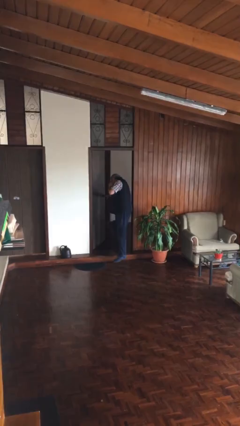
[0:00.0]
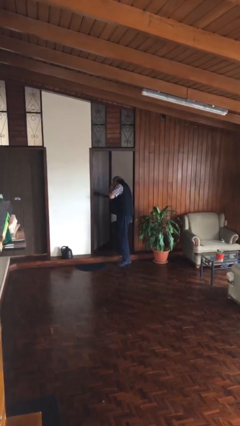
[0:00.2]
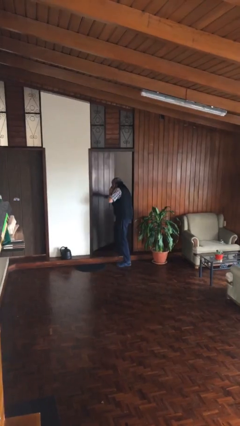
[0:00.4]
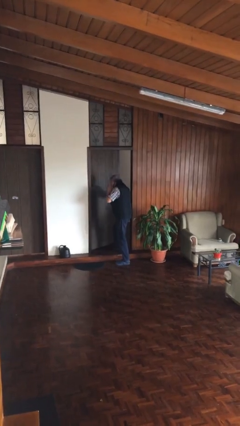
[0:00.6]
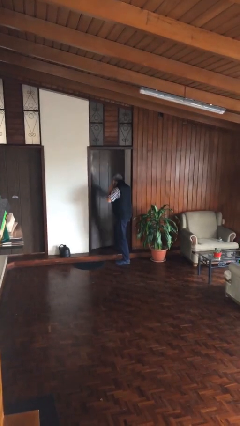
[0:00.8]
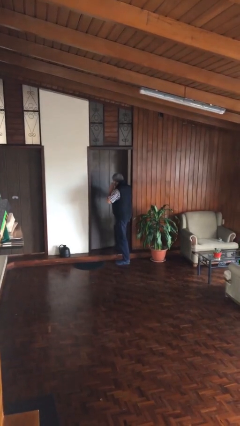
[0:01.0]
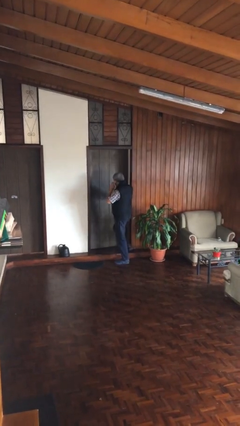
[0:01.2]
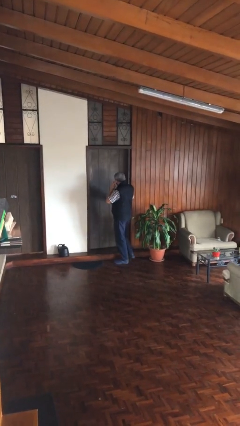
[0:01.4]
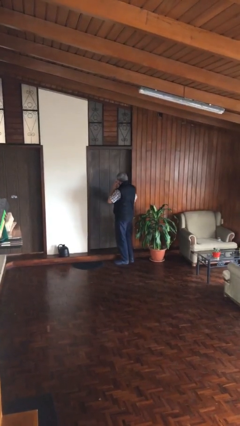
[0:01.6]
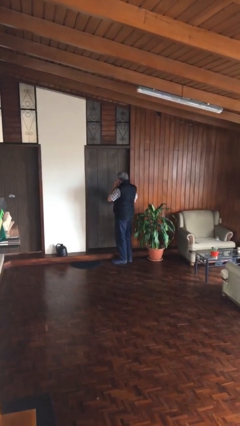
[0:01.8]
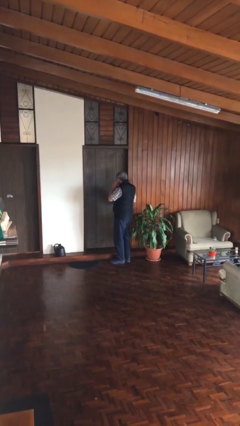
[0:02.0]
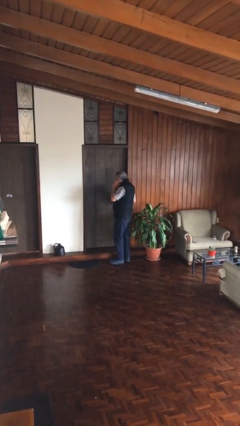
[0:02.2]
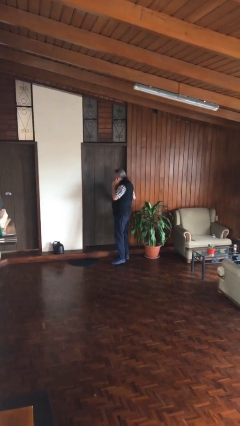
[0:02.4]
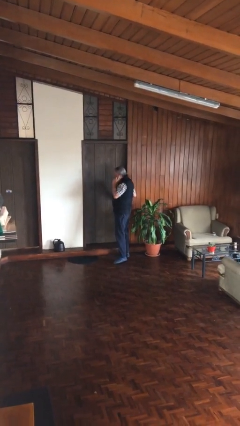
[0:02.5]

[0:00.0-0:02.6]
person closes facility door

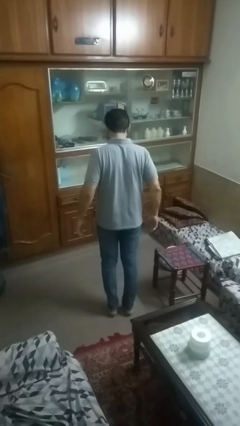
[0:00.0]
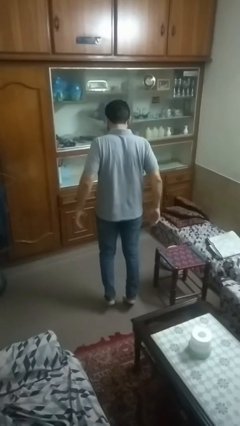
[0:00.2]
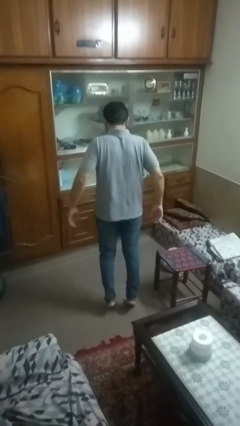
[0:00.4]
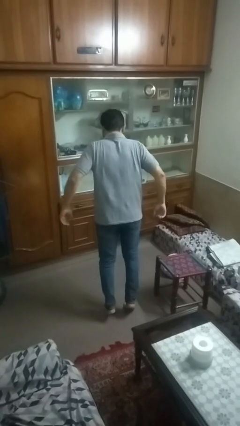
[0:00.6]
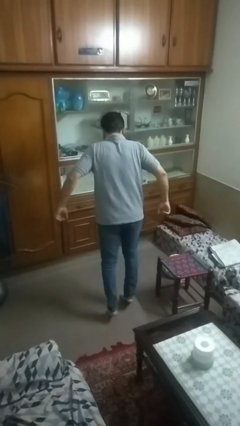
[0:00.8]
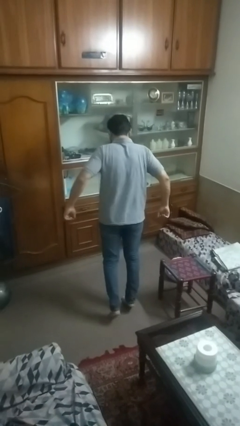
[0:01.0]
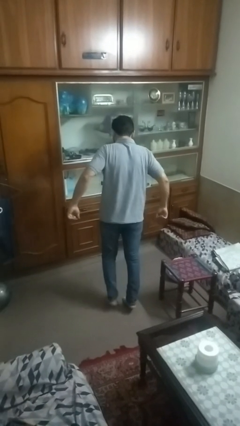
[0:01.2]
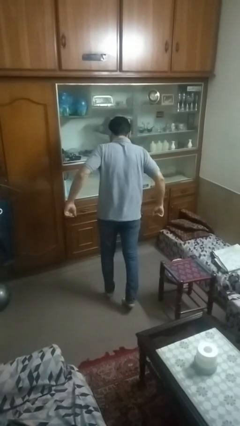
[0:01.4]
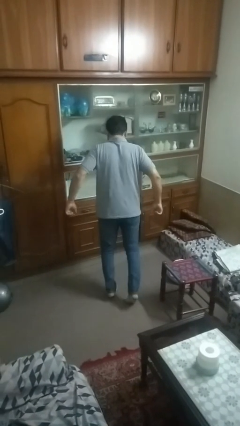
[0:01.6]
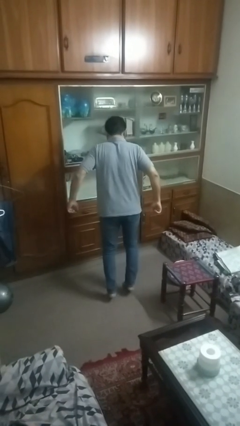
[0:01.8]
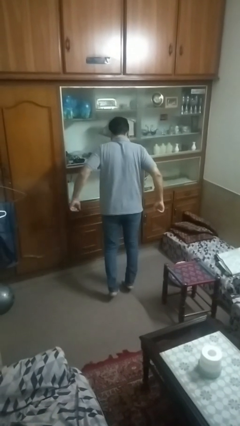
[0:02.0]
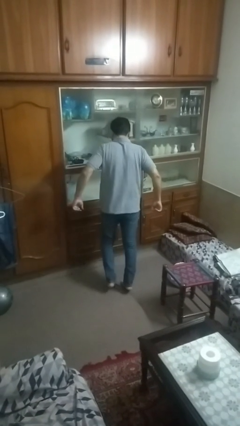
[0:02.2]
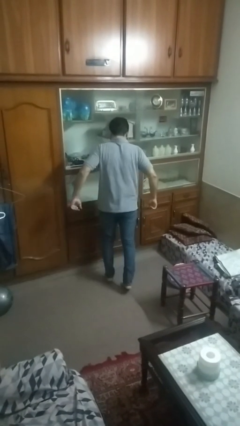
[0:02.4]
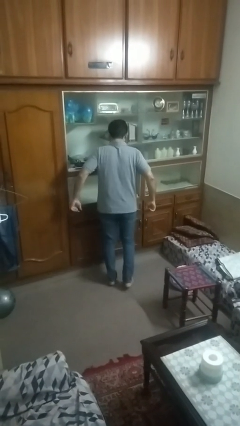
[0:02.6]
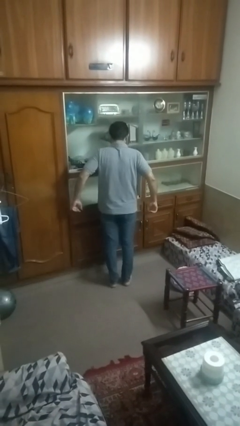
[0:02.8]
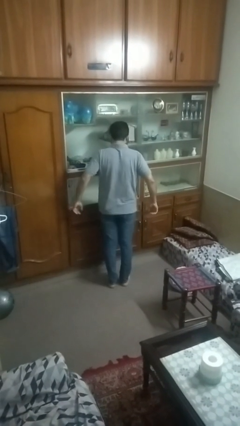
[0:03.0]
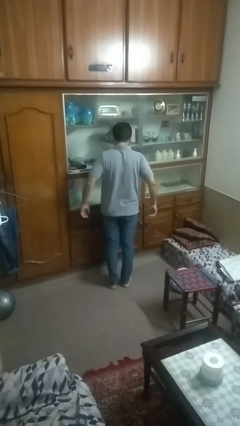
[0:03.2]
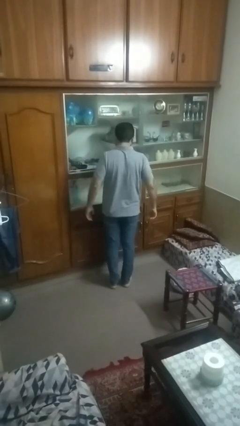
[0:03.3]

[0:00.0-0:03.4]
person walks tiptoe

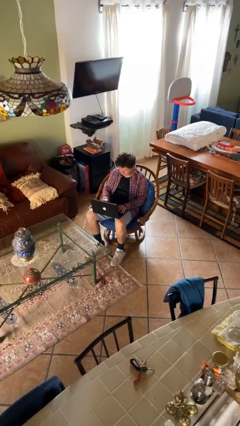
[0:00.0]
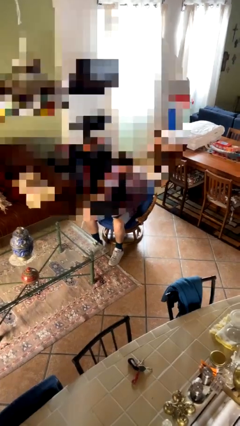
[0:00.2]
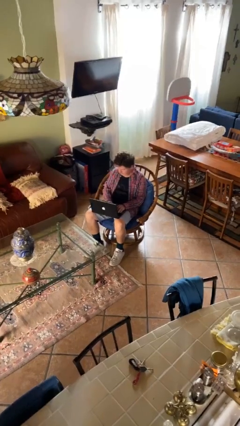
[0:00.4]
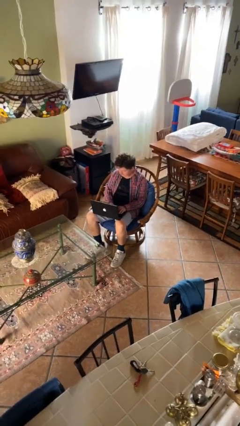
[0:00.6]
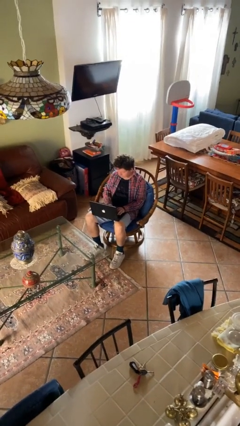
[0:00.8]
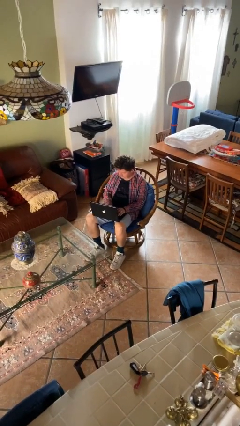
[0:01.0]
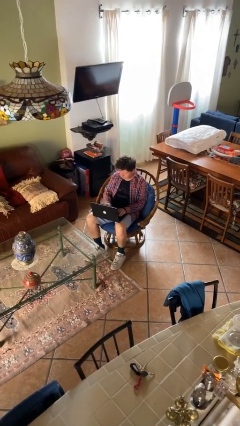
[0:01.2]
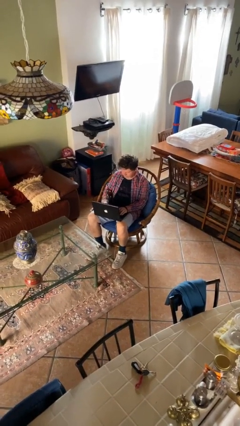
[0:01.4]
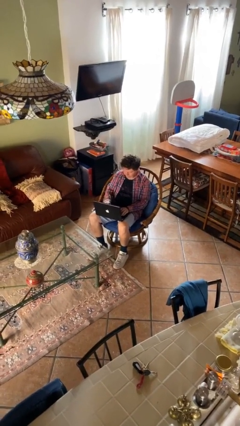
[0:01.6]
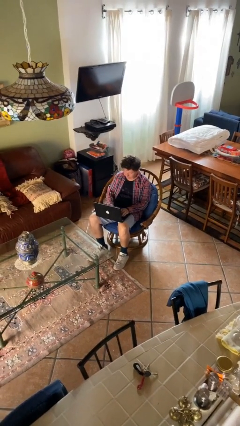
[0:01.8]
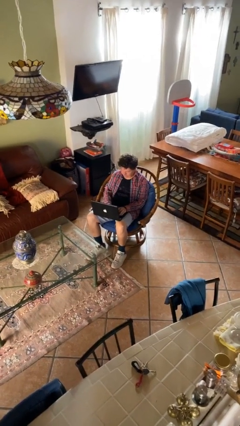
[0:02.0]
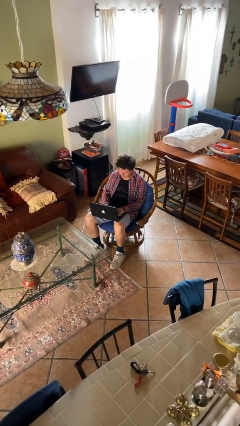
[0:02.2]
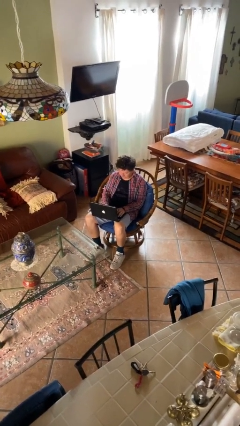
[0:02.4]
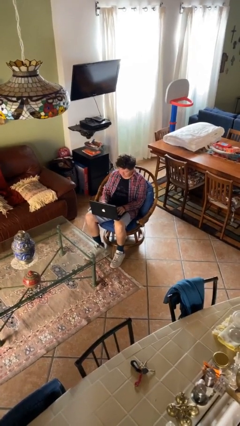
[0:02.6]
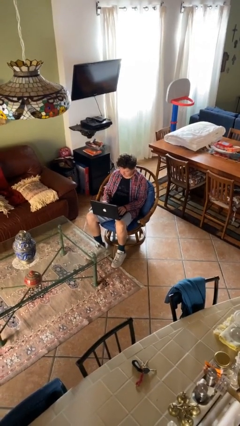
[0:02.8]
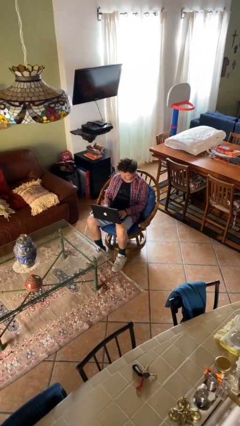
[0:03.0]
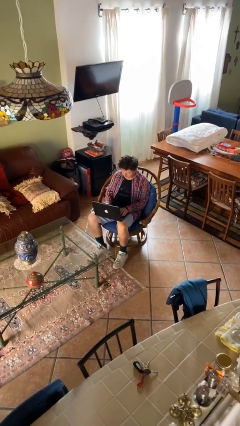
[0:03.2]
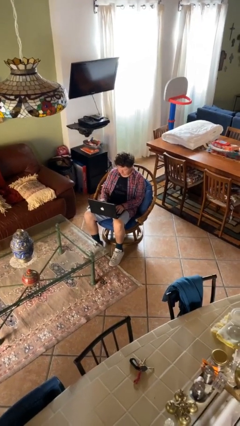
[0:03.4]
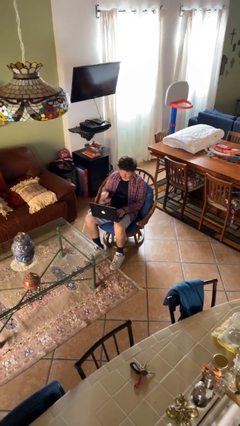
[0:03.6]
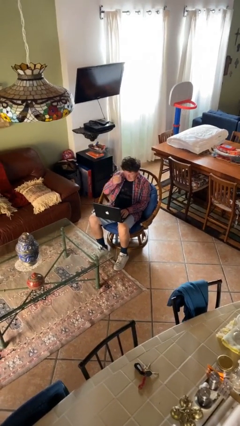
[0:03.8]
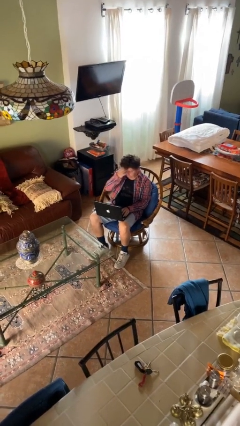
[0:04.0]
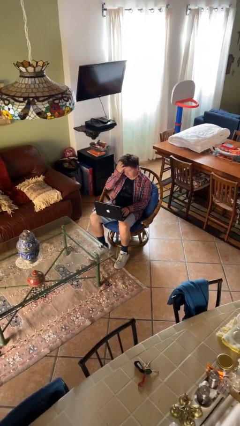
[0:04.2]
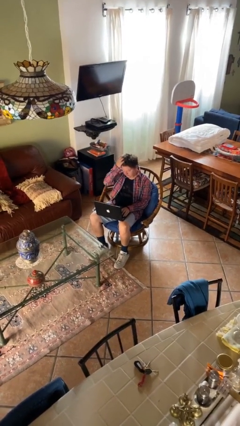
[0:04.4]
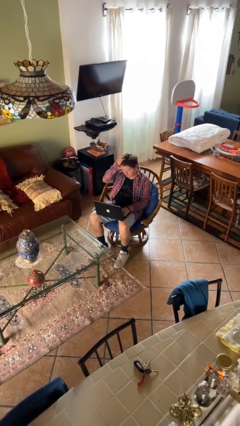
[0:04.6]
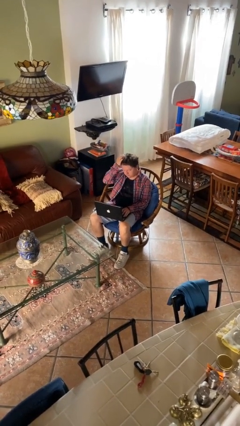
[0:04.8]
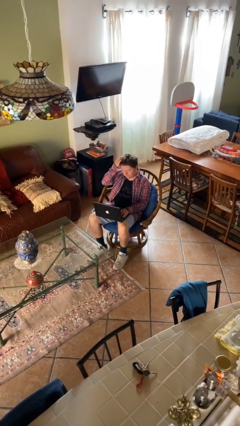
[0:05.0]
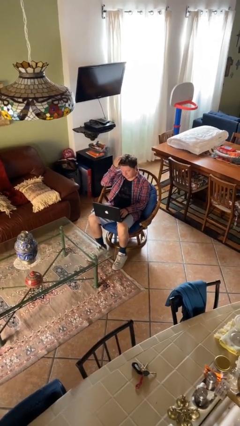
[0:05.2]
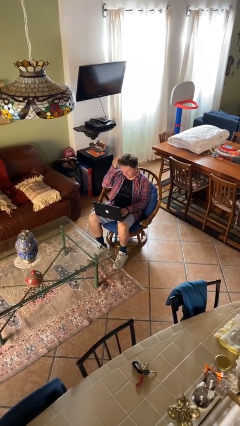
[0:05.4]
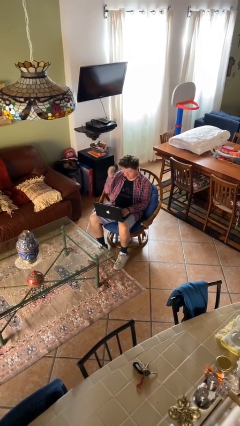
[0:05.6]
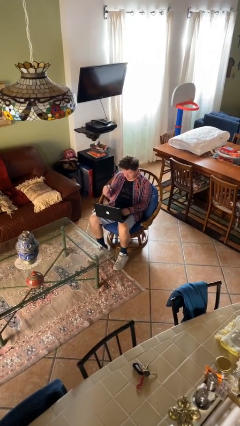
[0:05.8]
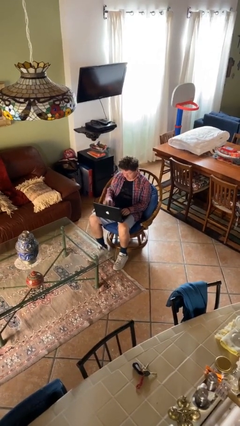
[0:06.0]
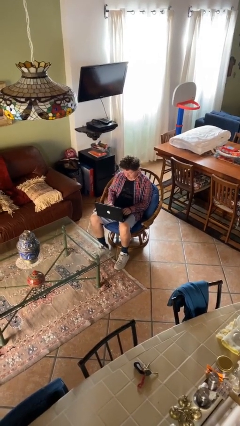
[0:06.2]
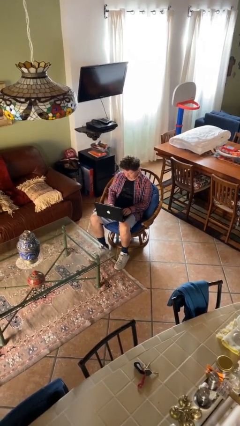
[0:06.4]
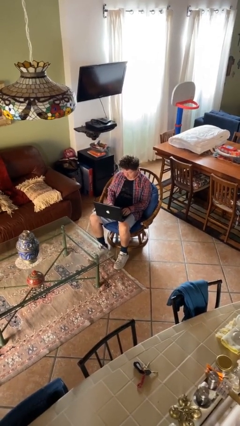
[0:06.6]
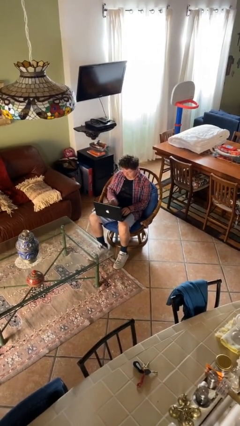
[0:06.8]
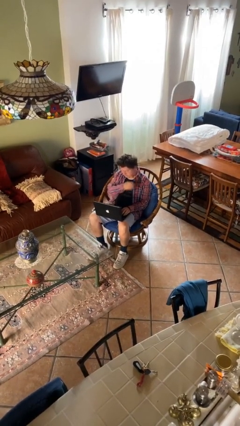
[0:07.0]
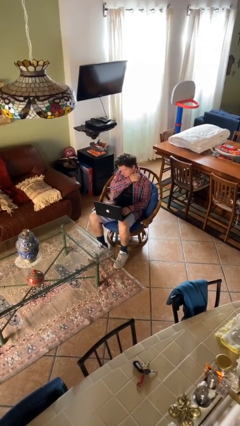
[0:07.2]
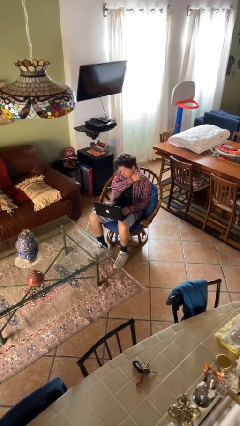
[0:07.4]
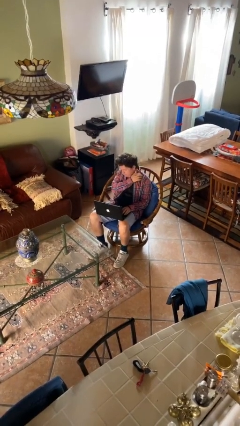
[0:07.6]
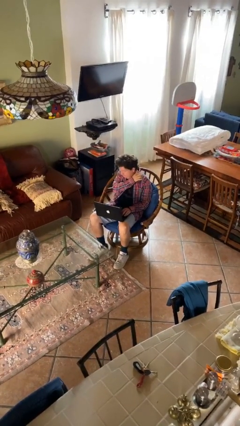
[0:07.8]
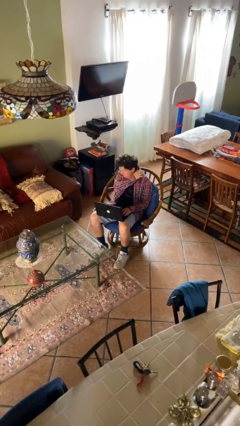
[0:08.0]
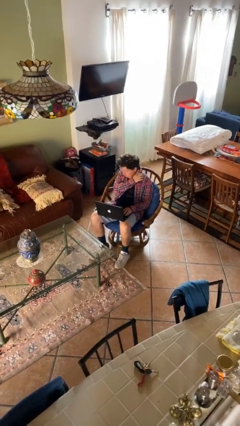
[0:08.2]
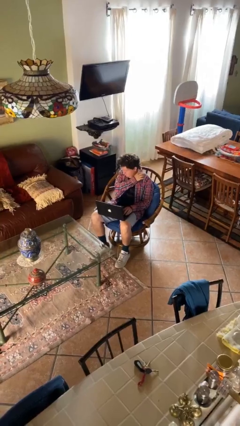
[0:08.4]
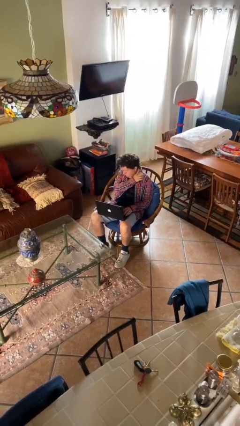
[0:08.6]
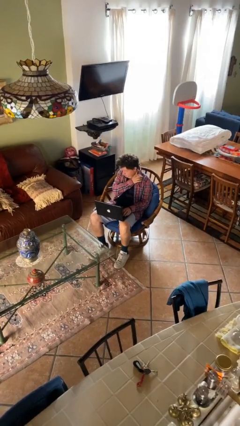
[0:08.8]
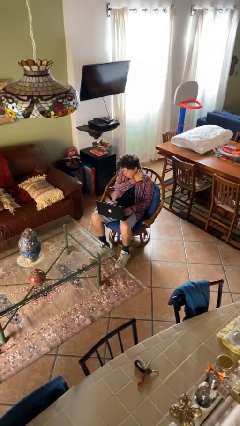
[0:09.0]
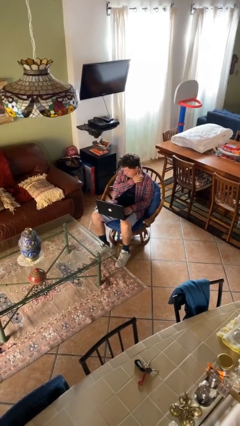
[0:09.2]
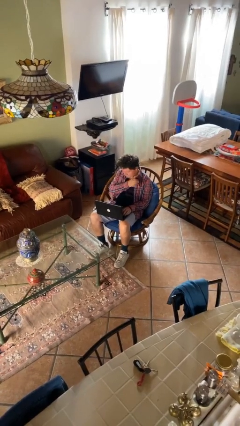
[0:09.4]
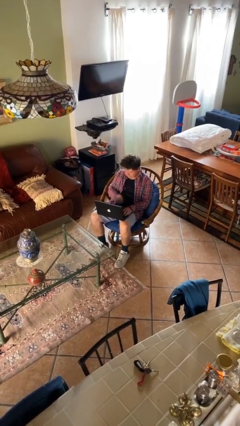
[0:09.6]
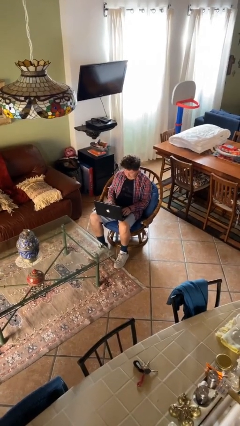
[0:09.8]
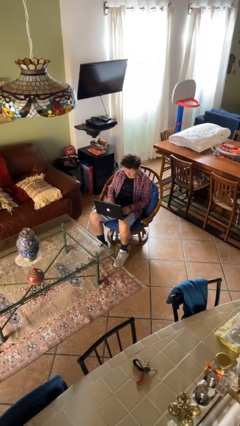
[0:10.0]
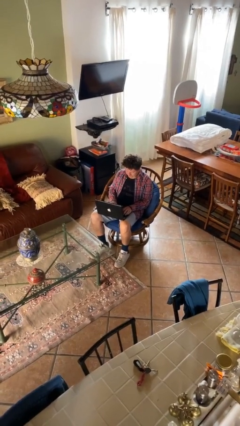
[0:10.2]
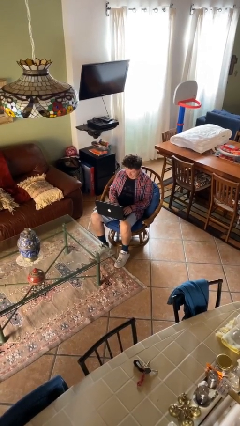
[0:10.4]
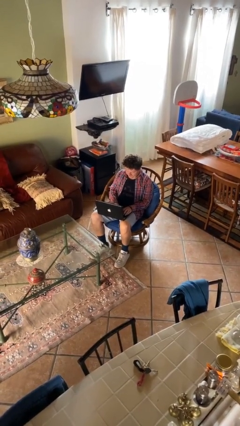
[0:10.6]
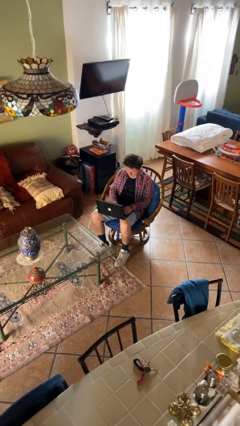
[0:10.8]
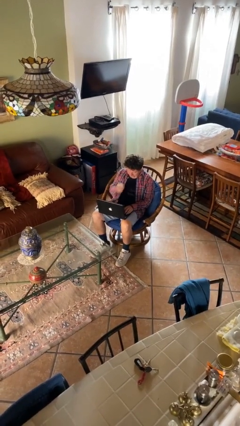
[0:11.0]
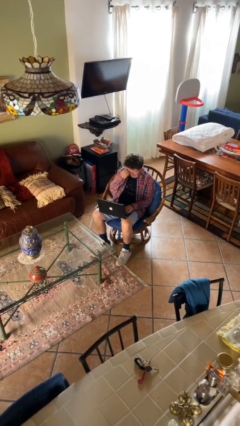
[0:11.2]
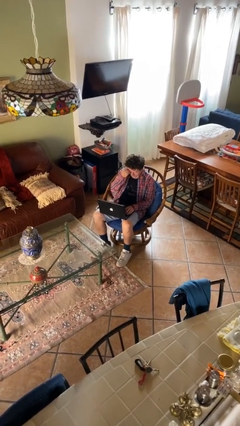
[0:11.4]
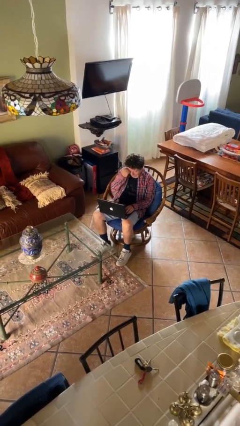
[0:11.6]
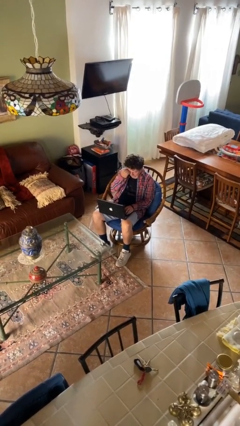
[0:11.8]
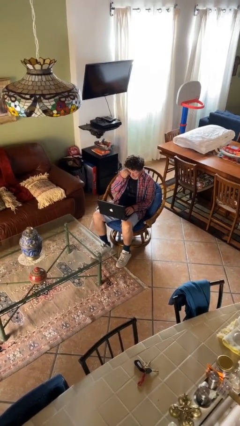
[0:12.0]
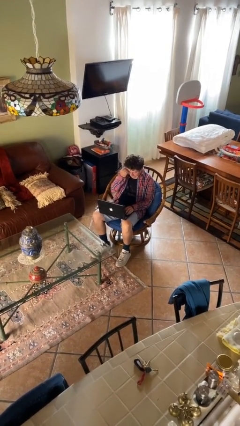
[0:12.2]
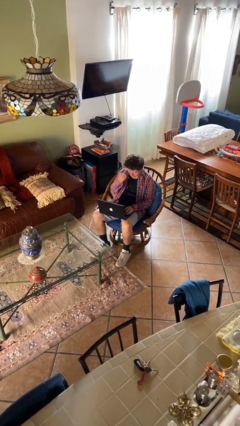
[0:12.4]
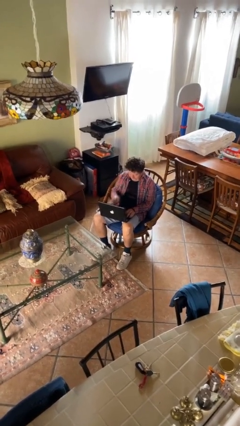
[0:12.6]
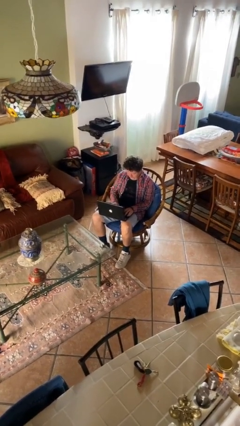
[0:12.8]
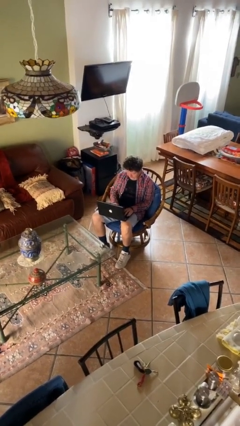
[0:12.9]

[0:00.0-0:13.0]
person interacts with laptop
